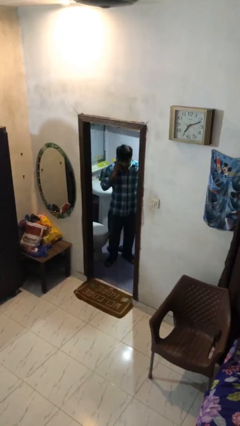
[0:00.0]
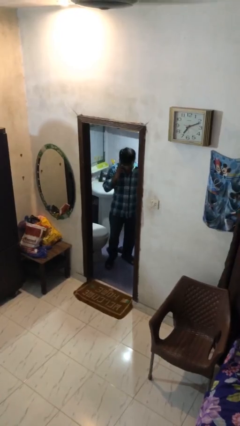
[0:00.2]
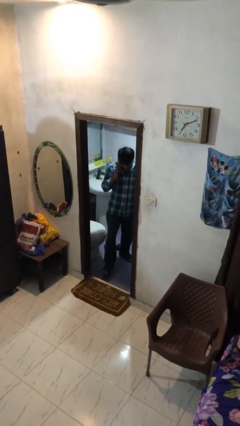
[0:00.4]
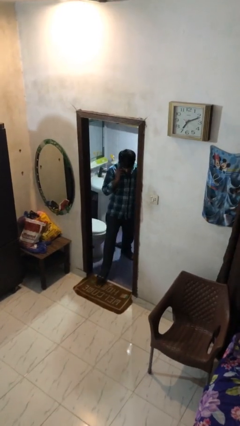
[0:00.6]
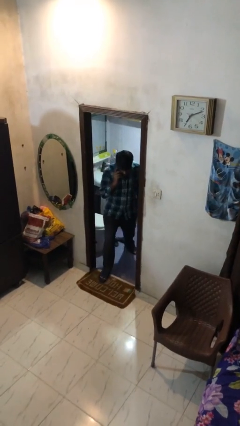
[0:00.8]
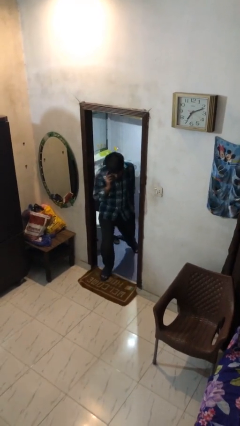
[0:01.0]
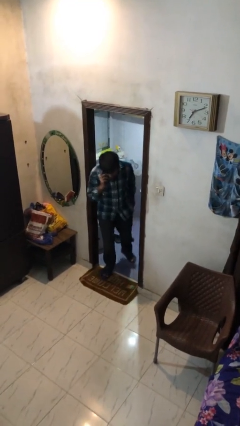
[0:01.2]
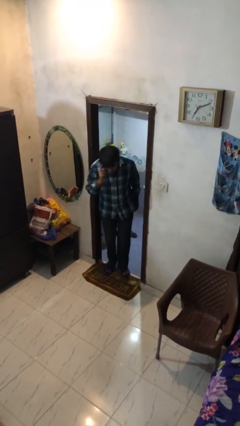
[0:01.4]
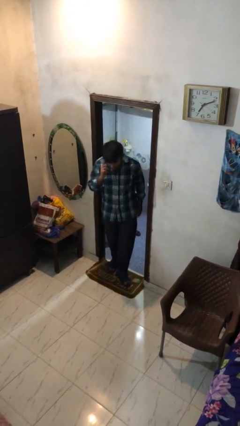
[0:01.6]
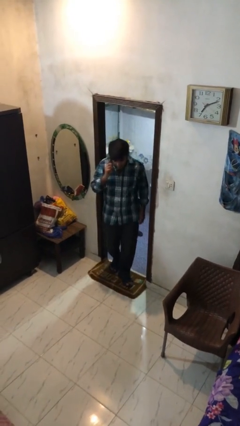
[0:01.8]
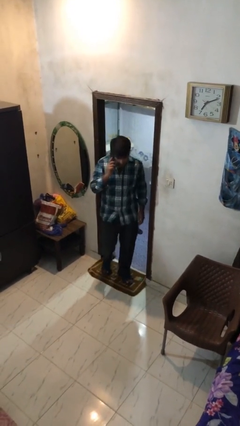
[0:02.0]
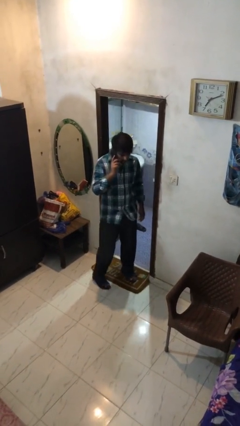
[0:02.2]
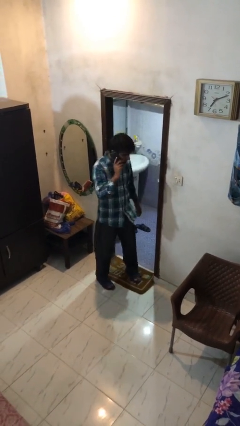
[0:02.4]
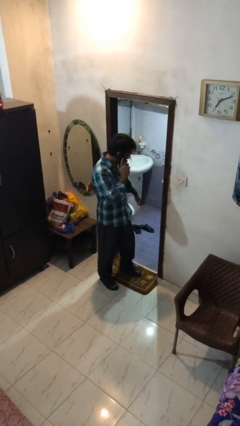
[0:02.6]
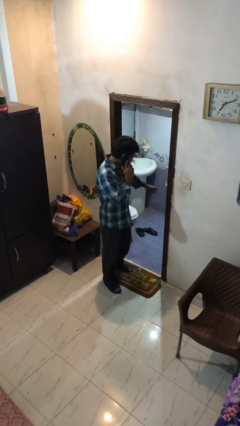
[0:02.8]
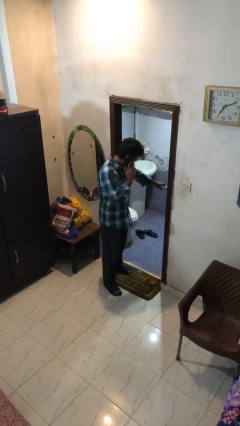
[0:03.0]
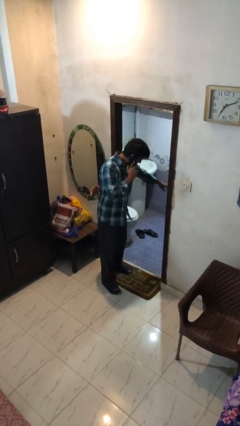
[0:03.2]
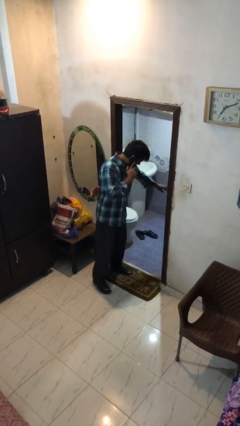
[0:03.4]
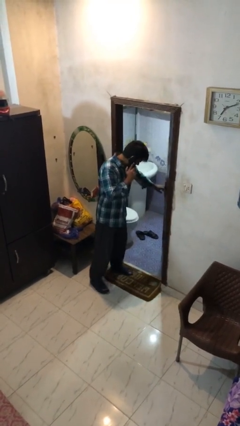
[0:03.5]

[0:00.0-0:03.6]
person enters scene through structure

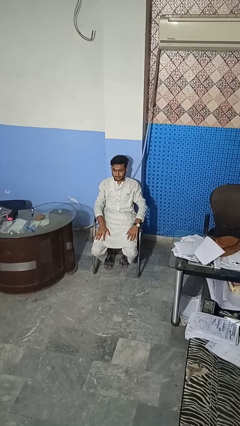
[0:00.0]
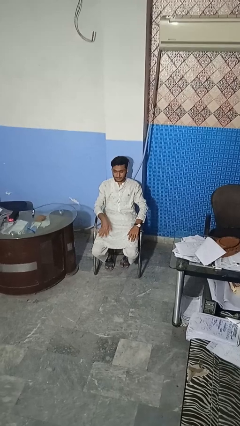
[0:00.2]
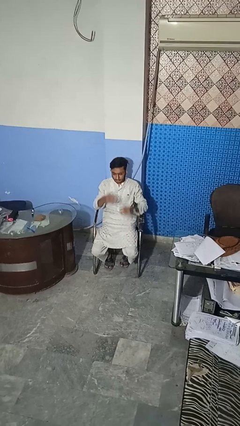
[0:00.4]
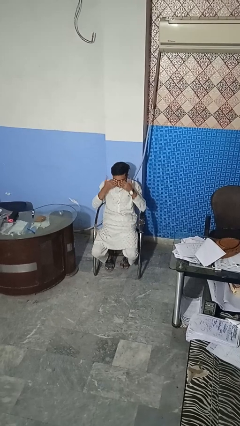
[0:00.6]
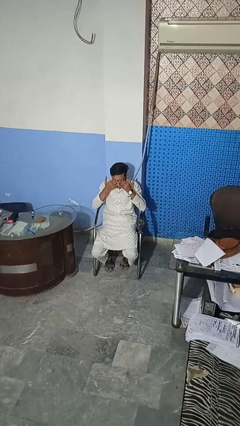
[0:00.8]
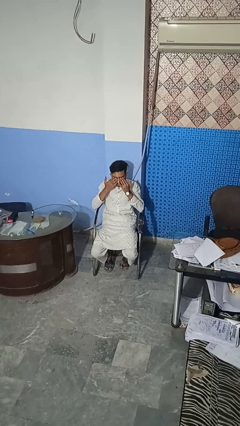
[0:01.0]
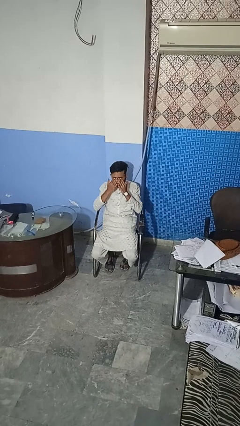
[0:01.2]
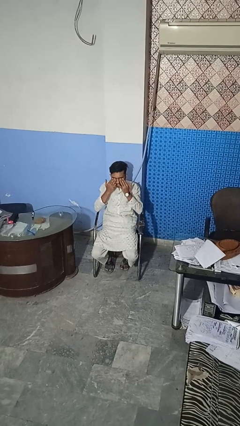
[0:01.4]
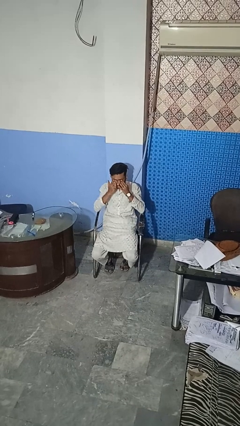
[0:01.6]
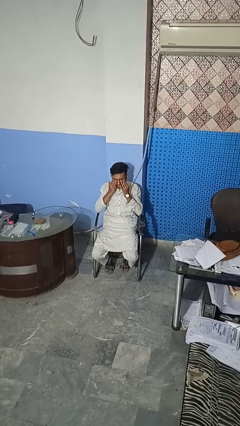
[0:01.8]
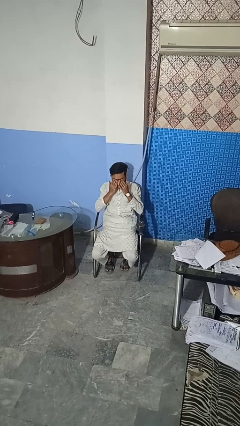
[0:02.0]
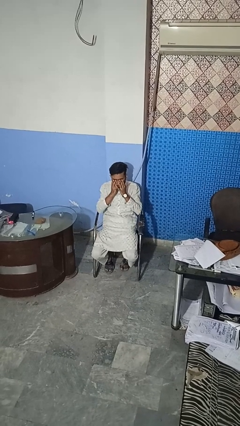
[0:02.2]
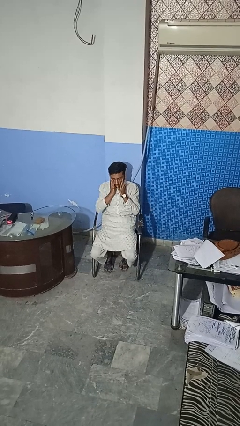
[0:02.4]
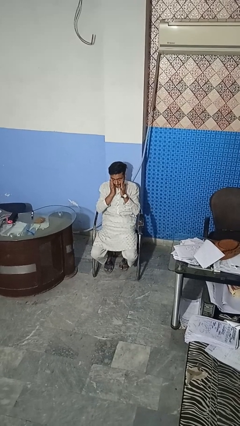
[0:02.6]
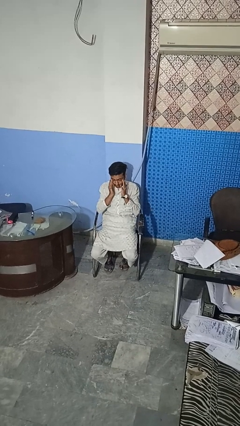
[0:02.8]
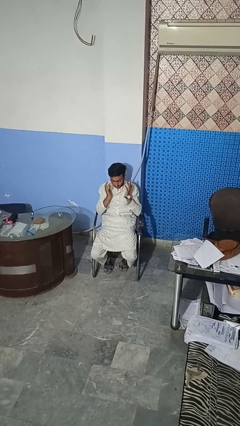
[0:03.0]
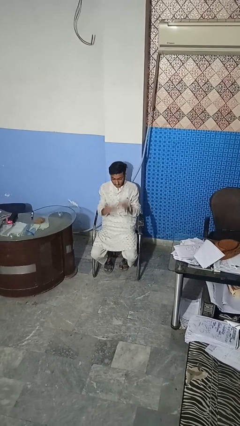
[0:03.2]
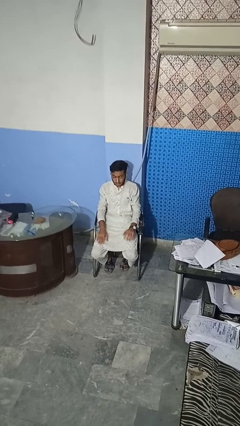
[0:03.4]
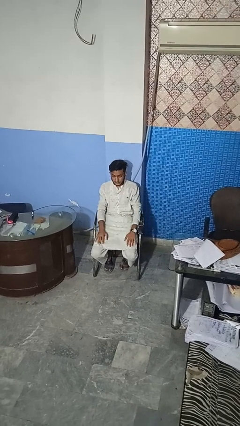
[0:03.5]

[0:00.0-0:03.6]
person rubs eyes

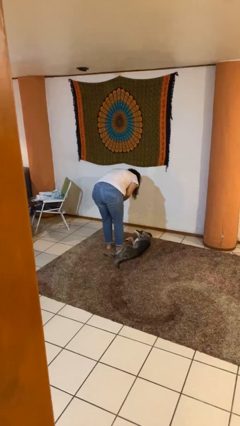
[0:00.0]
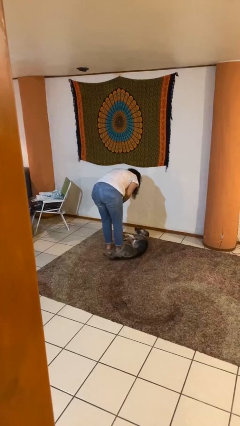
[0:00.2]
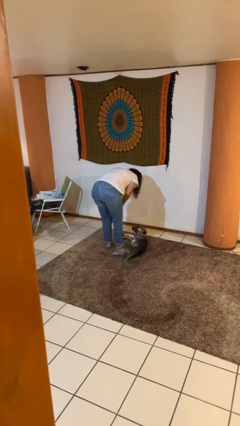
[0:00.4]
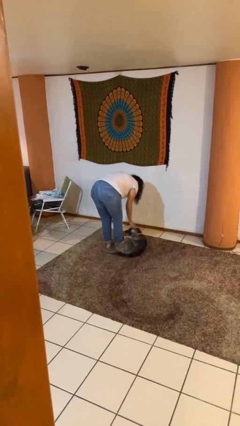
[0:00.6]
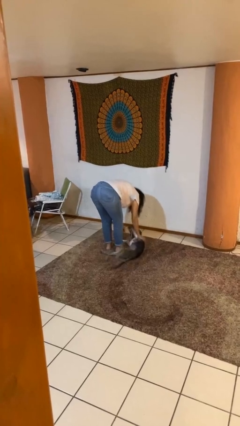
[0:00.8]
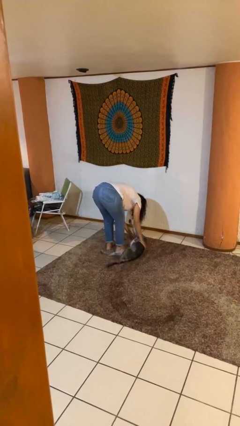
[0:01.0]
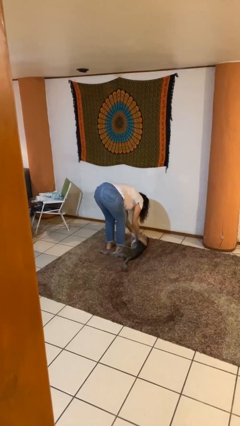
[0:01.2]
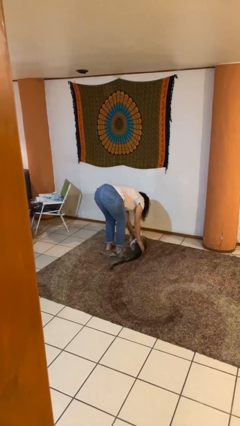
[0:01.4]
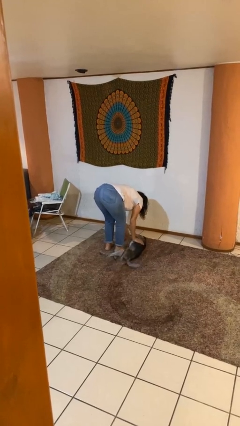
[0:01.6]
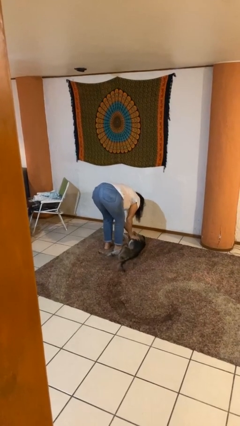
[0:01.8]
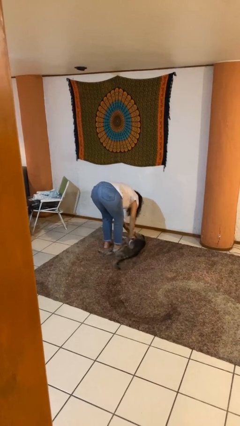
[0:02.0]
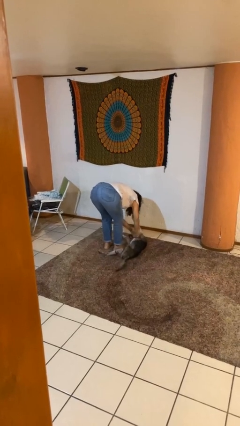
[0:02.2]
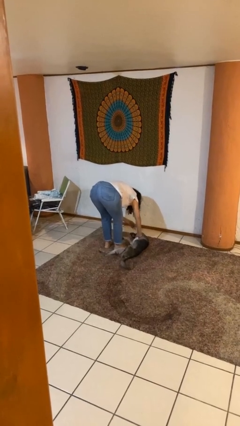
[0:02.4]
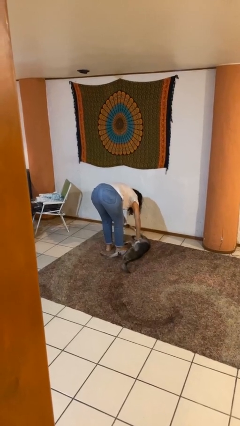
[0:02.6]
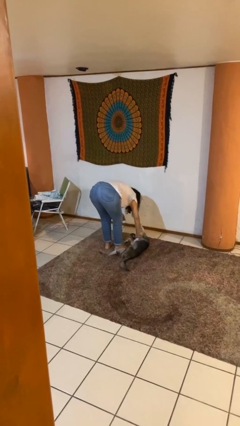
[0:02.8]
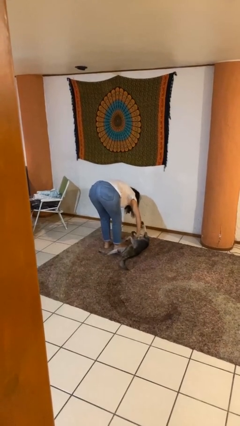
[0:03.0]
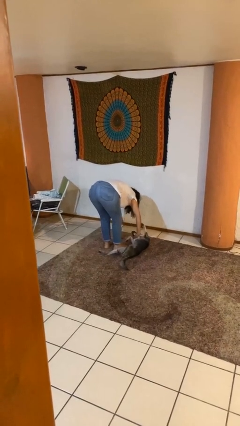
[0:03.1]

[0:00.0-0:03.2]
person pets dog

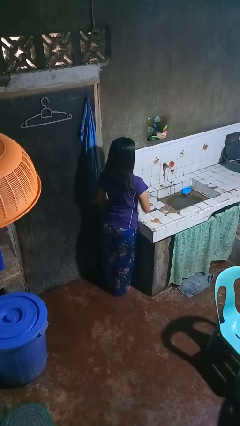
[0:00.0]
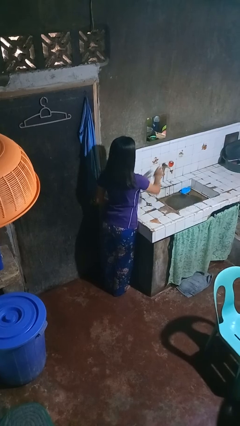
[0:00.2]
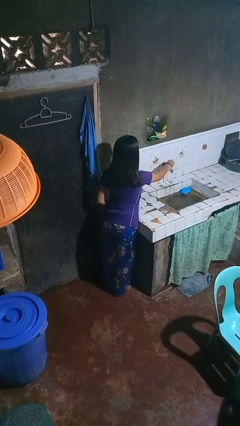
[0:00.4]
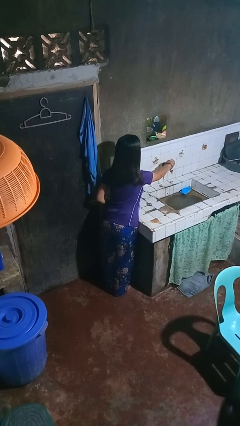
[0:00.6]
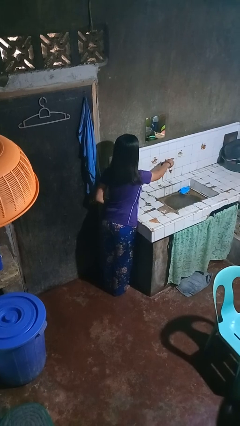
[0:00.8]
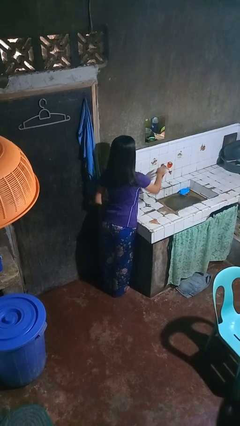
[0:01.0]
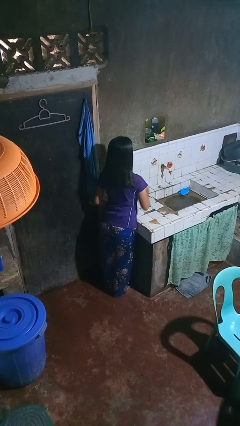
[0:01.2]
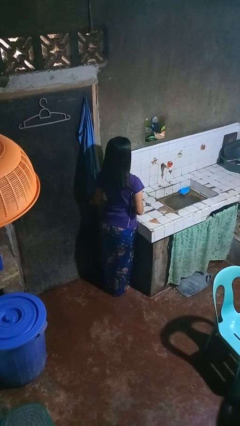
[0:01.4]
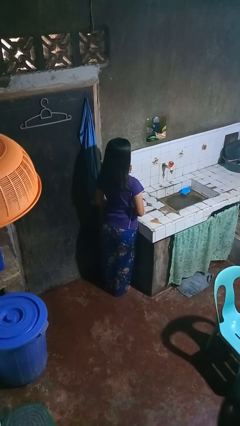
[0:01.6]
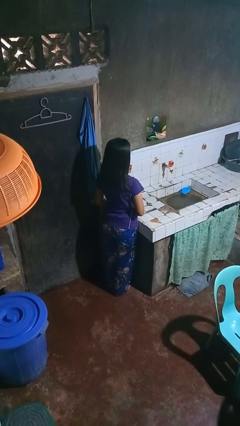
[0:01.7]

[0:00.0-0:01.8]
person turns off faucet

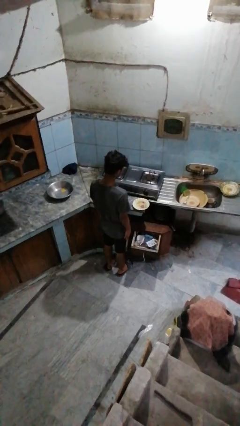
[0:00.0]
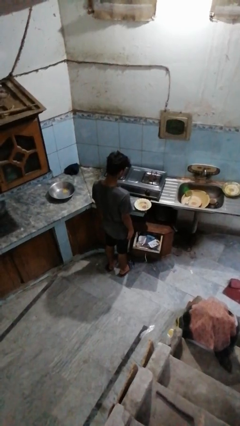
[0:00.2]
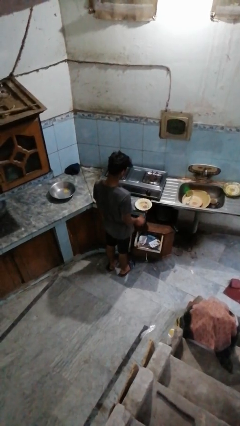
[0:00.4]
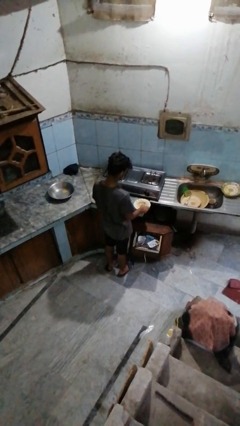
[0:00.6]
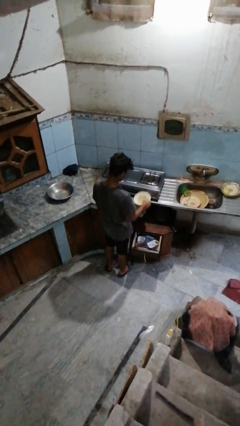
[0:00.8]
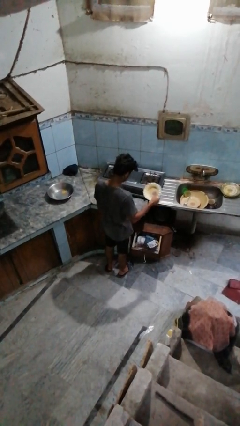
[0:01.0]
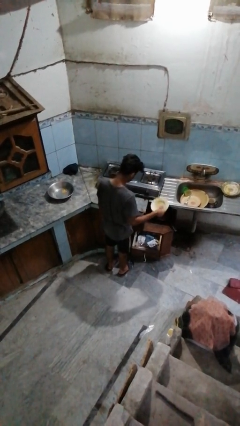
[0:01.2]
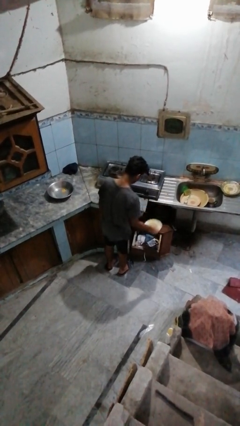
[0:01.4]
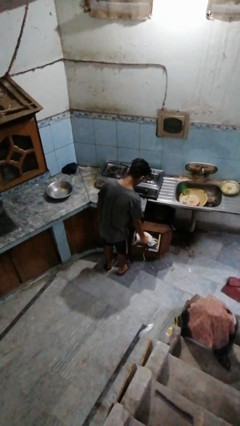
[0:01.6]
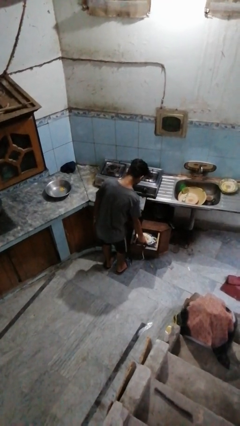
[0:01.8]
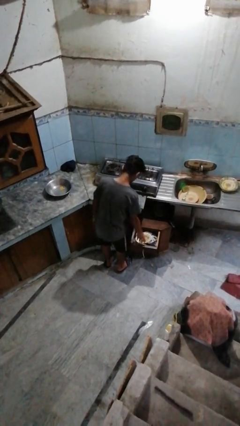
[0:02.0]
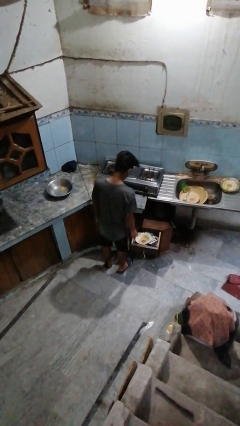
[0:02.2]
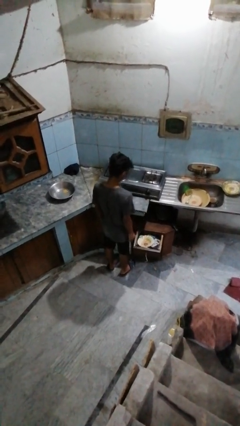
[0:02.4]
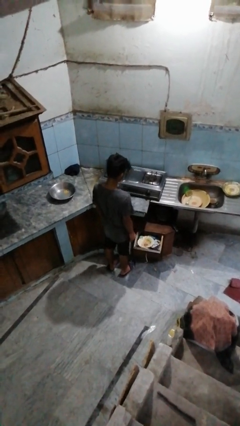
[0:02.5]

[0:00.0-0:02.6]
person puts object into kitchen drawer

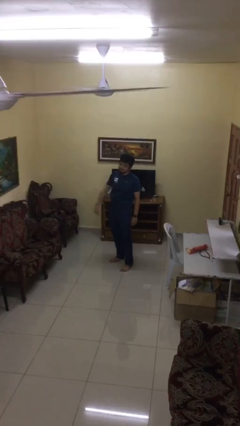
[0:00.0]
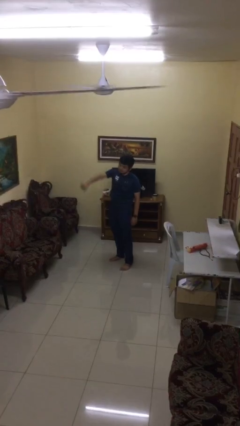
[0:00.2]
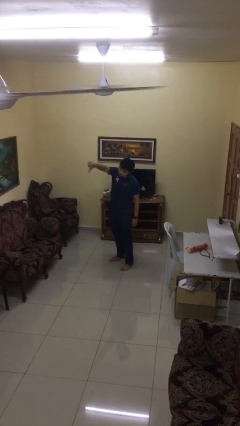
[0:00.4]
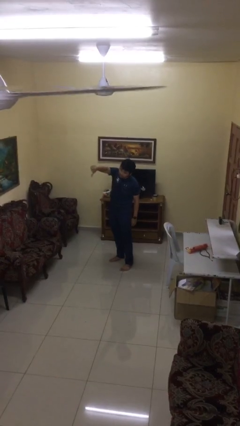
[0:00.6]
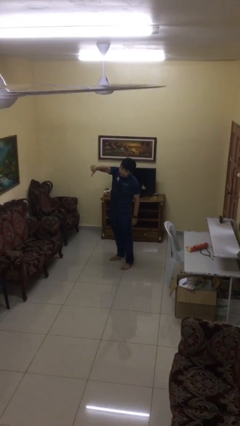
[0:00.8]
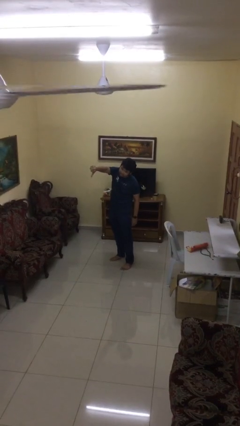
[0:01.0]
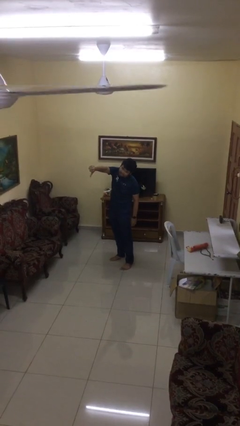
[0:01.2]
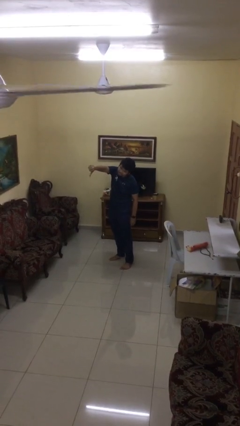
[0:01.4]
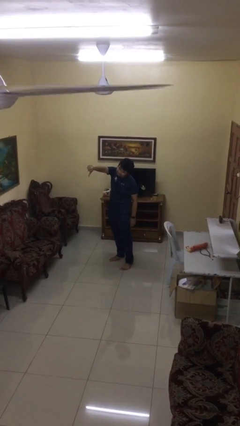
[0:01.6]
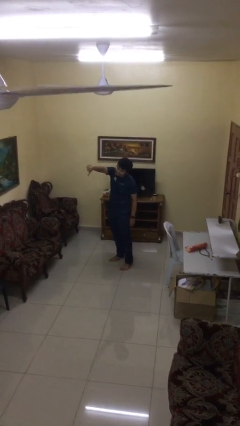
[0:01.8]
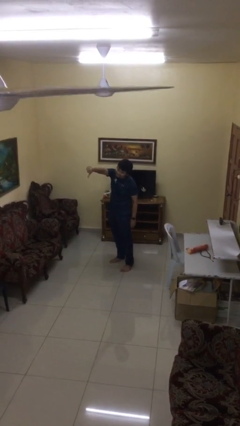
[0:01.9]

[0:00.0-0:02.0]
person gestures thumbs down

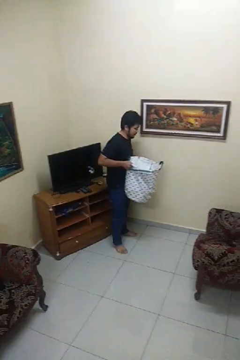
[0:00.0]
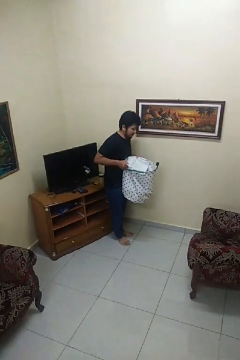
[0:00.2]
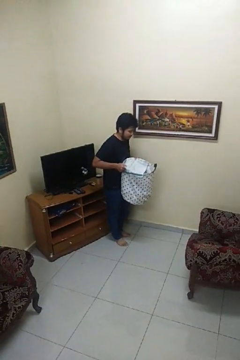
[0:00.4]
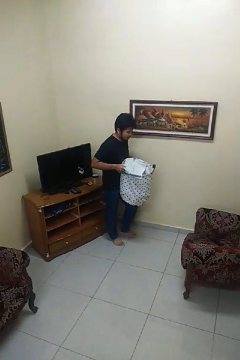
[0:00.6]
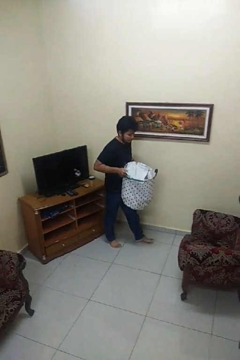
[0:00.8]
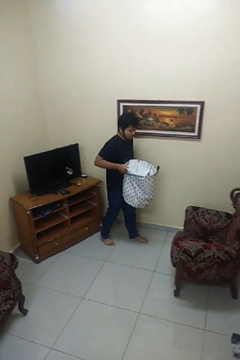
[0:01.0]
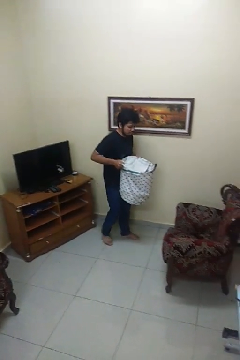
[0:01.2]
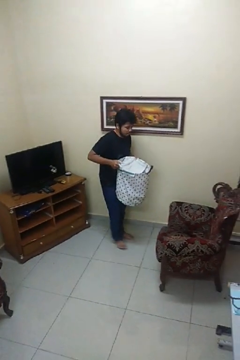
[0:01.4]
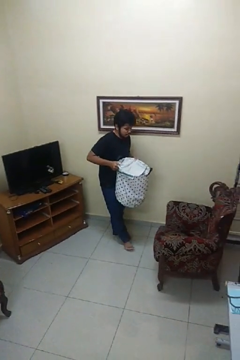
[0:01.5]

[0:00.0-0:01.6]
person carries laundry basket
